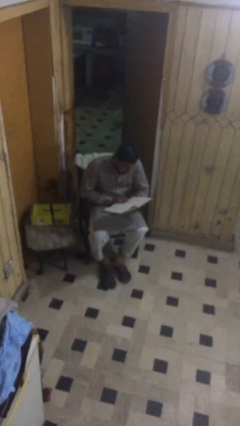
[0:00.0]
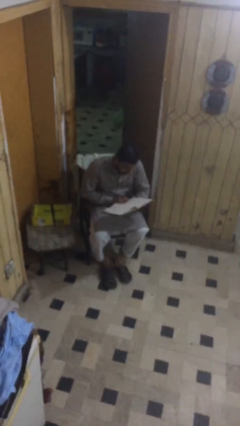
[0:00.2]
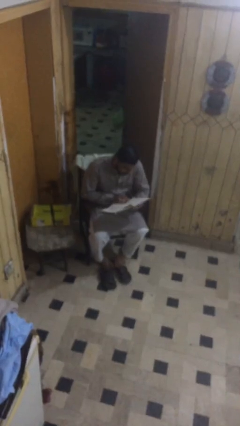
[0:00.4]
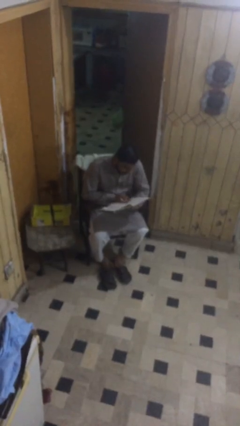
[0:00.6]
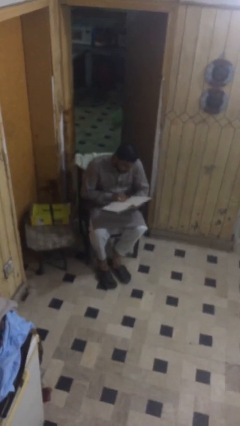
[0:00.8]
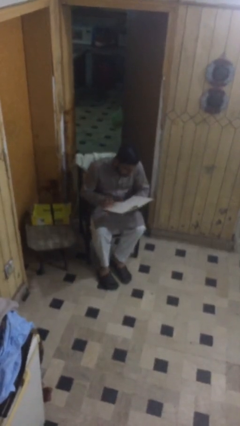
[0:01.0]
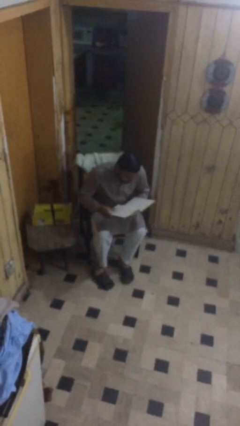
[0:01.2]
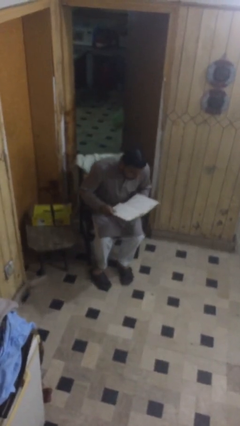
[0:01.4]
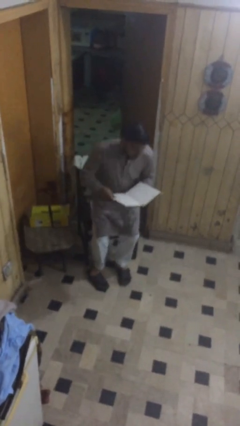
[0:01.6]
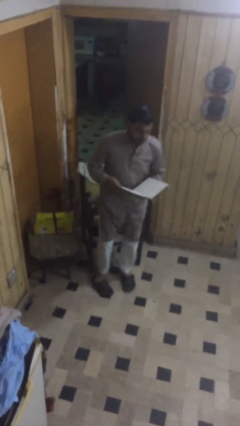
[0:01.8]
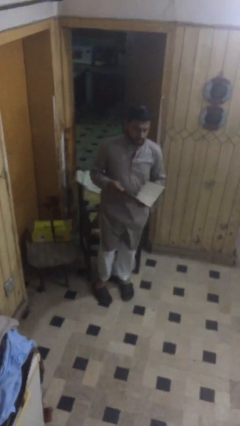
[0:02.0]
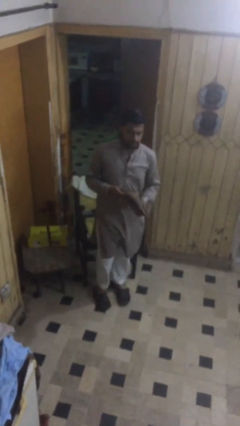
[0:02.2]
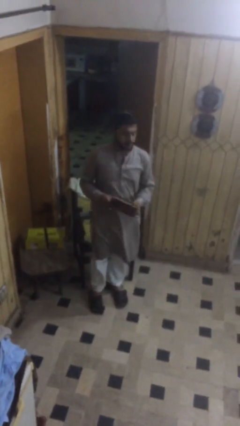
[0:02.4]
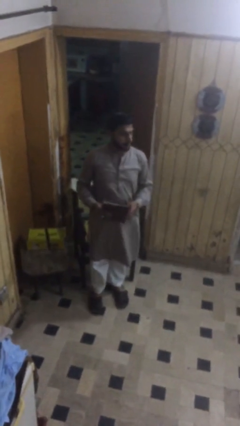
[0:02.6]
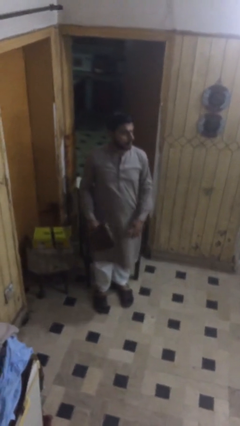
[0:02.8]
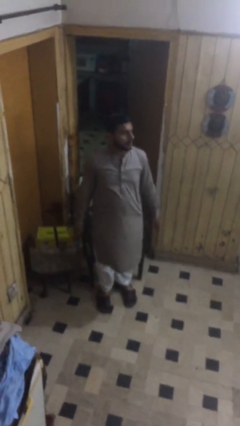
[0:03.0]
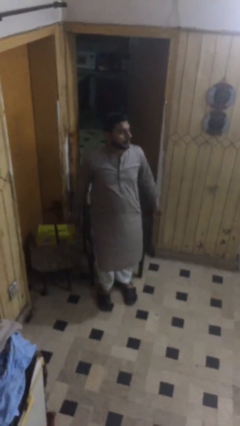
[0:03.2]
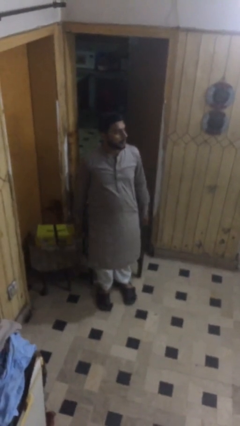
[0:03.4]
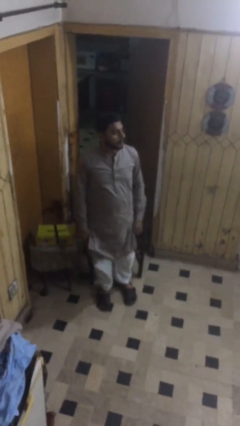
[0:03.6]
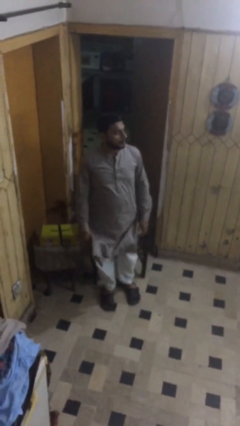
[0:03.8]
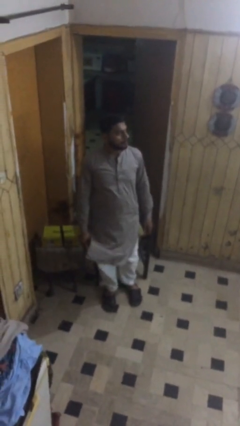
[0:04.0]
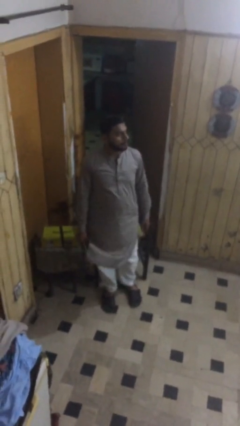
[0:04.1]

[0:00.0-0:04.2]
person stands up

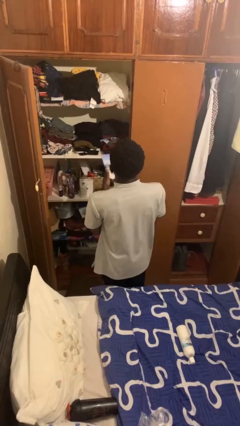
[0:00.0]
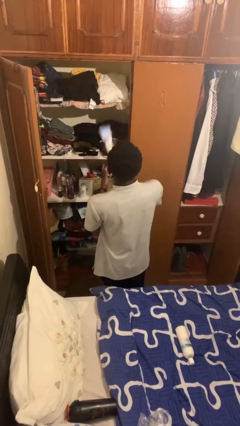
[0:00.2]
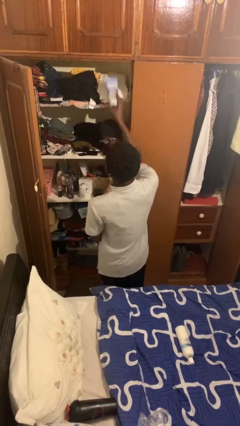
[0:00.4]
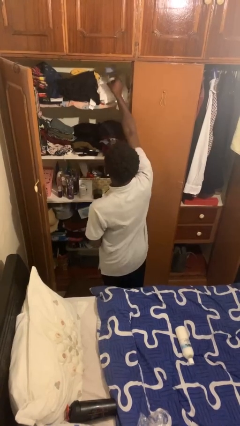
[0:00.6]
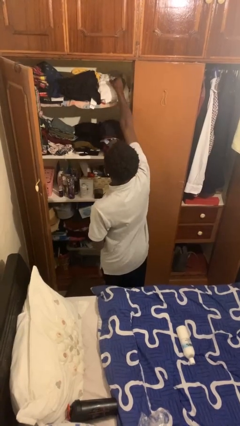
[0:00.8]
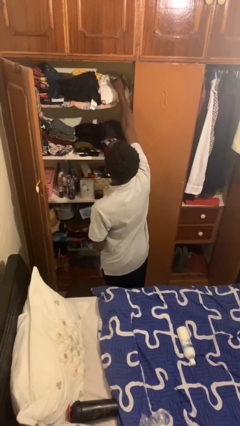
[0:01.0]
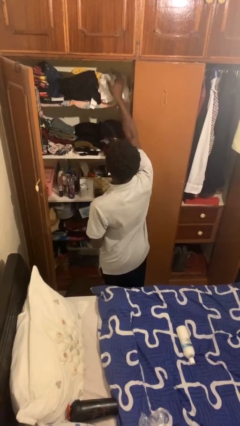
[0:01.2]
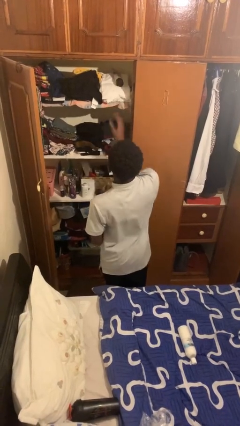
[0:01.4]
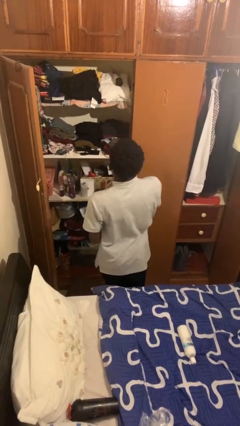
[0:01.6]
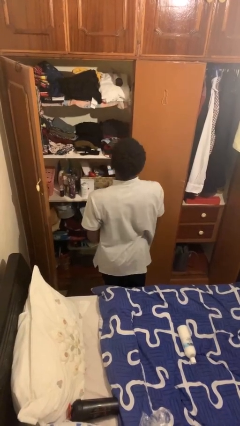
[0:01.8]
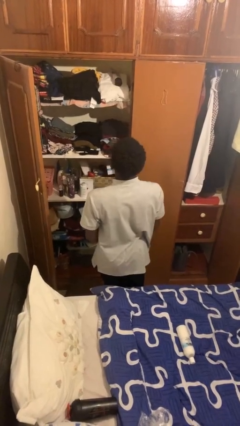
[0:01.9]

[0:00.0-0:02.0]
person puts down object on shelf

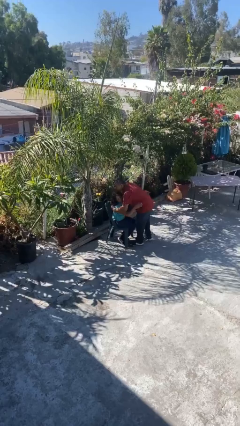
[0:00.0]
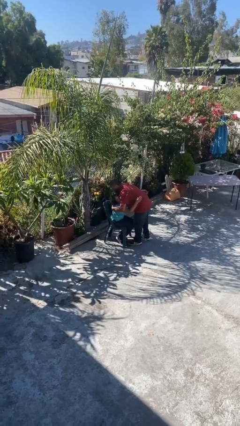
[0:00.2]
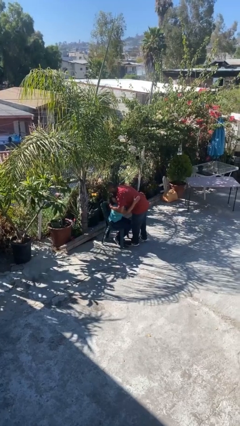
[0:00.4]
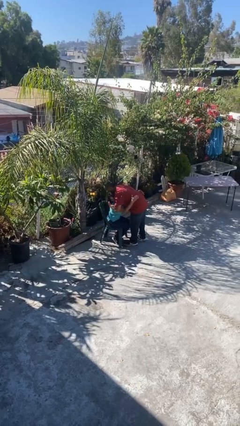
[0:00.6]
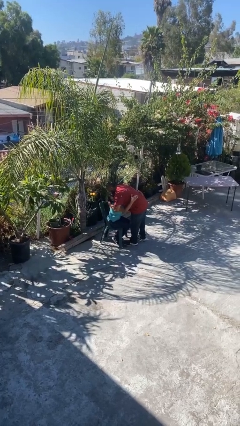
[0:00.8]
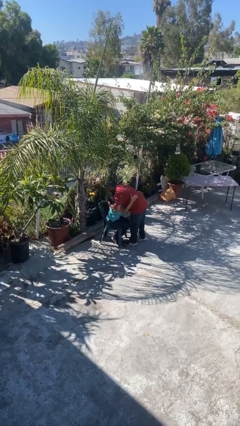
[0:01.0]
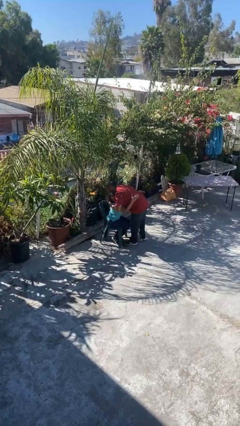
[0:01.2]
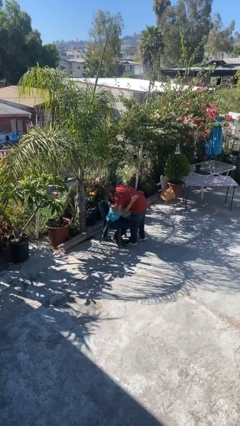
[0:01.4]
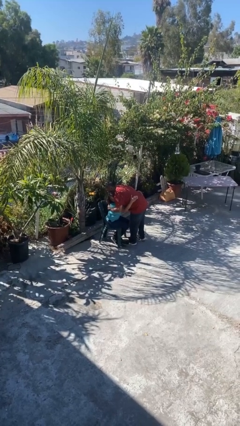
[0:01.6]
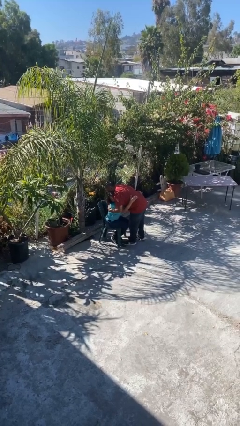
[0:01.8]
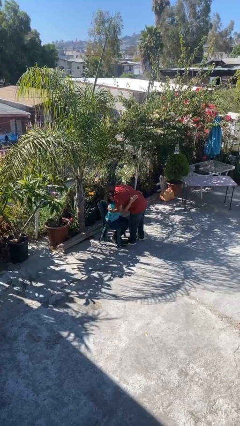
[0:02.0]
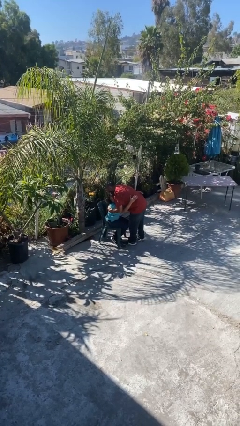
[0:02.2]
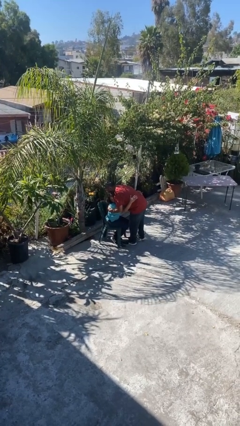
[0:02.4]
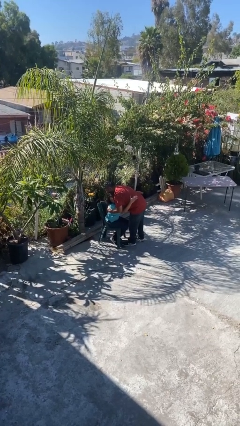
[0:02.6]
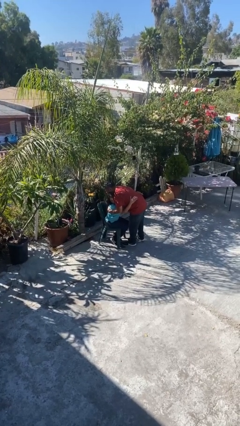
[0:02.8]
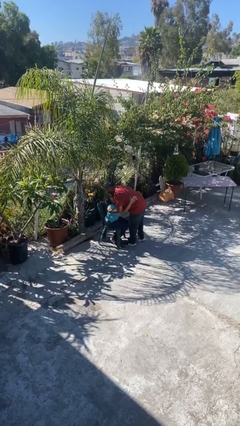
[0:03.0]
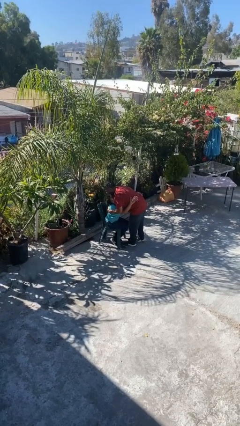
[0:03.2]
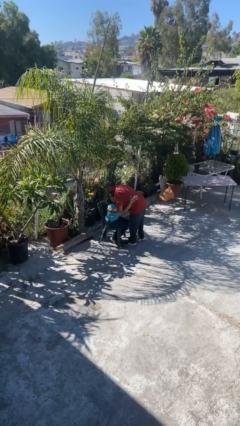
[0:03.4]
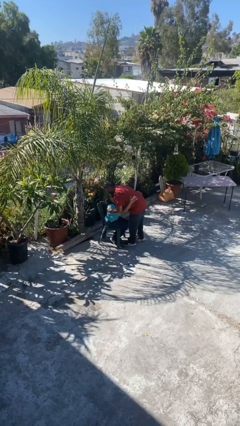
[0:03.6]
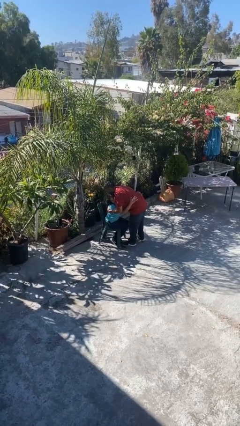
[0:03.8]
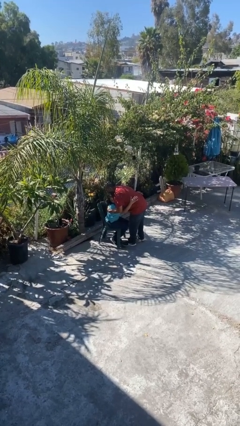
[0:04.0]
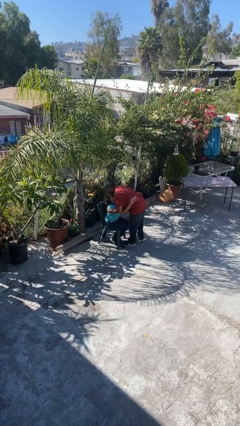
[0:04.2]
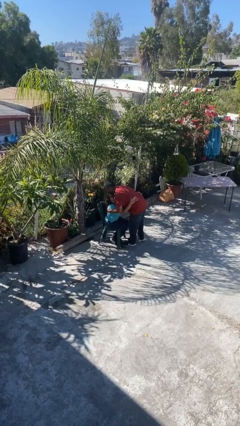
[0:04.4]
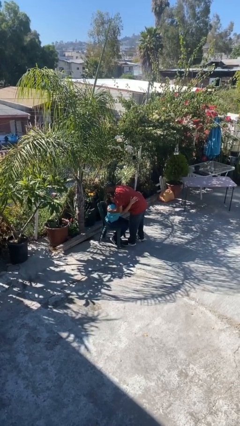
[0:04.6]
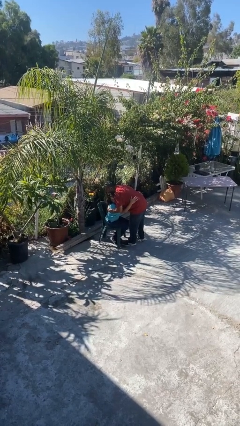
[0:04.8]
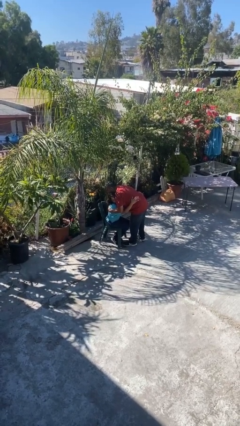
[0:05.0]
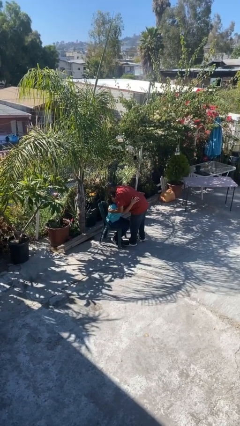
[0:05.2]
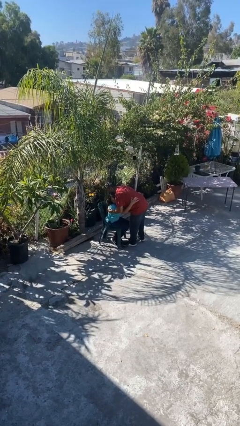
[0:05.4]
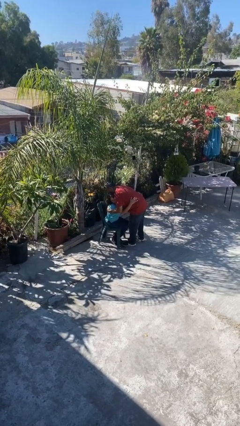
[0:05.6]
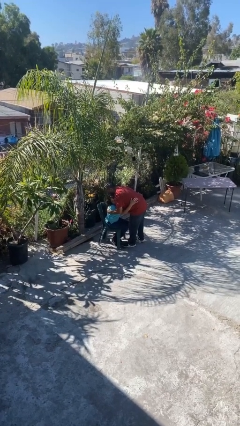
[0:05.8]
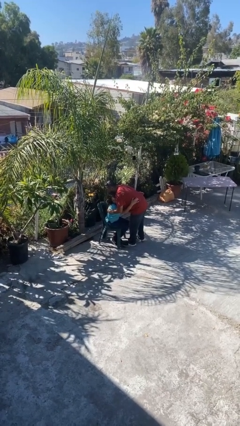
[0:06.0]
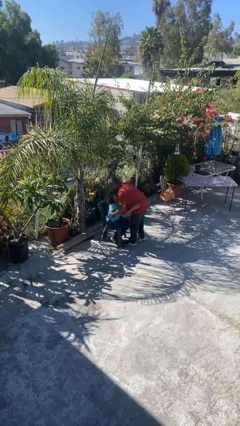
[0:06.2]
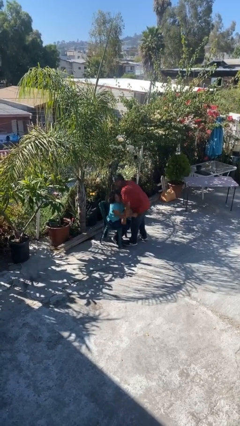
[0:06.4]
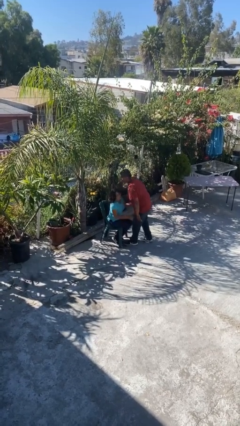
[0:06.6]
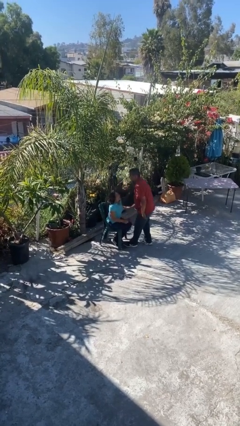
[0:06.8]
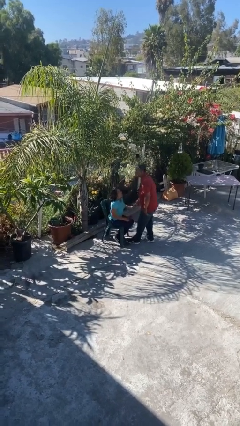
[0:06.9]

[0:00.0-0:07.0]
person embraces person

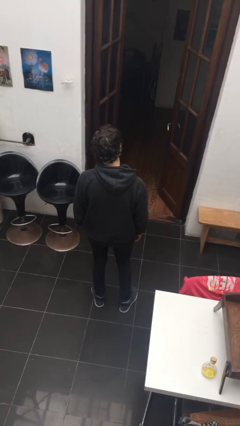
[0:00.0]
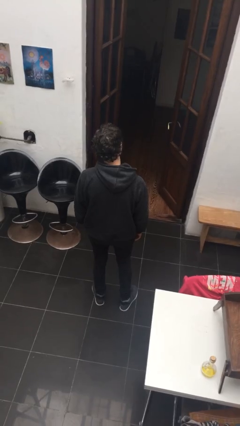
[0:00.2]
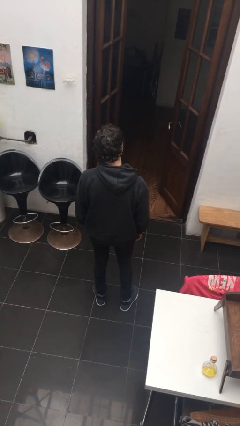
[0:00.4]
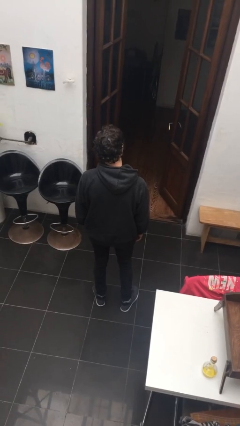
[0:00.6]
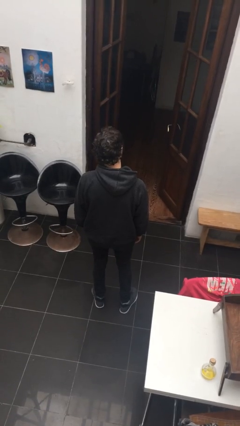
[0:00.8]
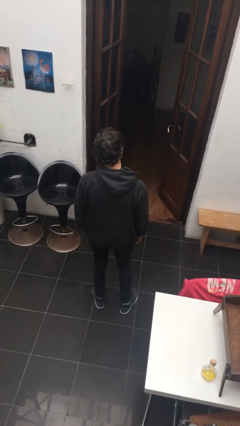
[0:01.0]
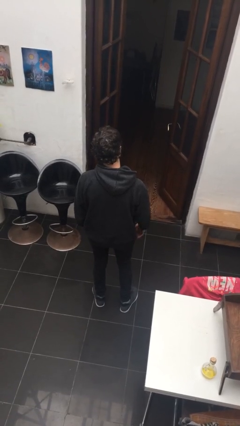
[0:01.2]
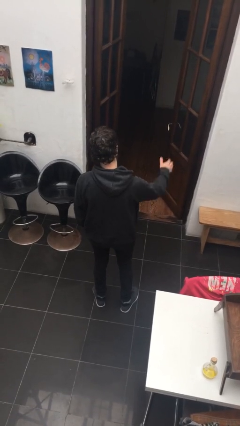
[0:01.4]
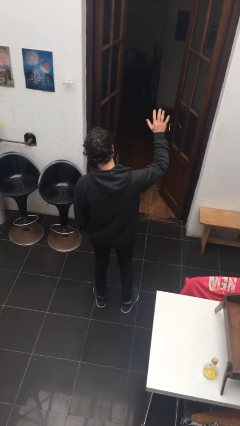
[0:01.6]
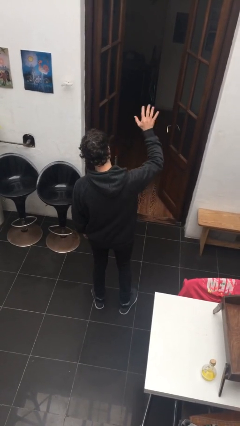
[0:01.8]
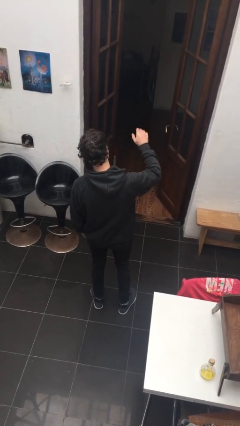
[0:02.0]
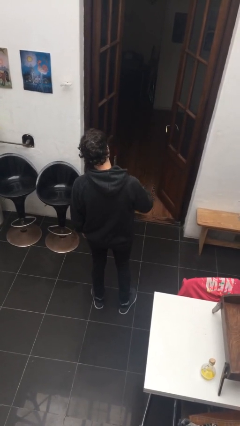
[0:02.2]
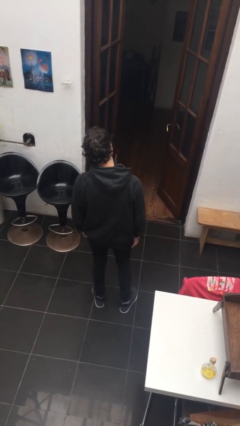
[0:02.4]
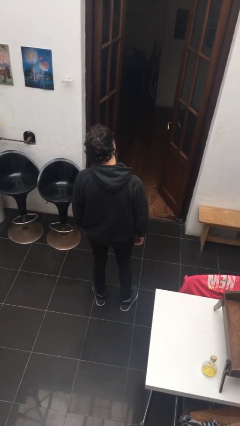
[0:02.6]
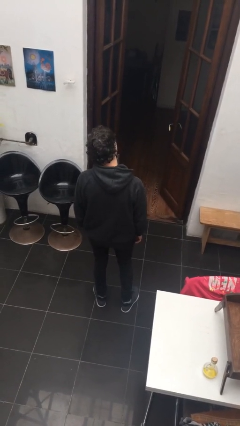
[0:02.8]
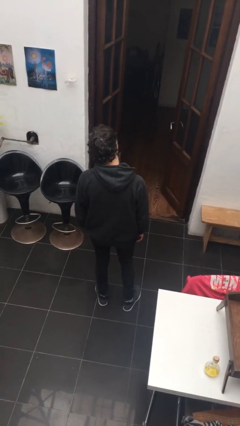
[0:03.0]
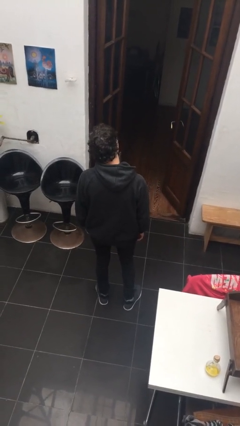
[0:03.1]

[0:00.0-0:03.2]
person waves at person

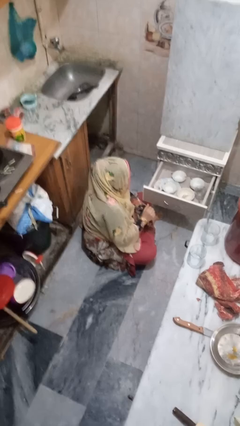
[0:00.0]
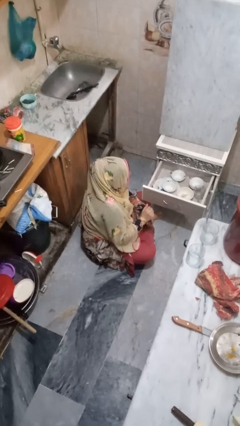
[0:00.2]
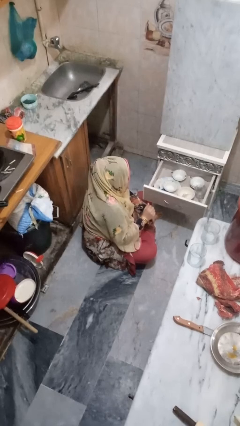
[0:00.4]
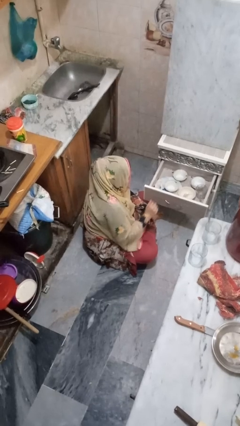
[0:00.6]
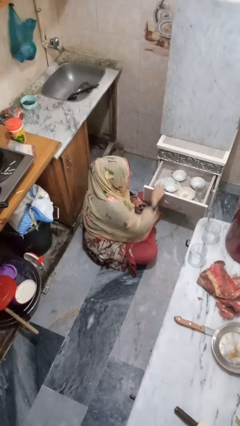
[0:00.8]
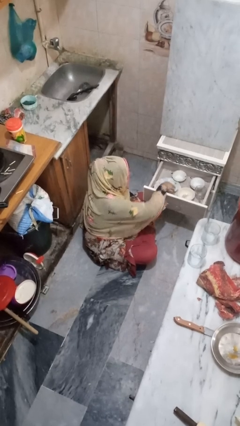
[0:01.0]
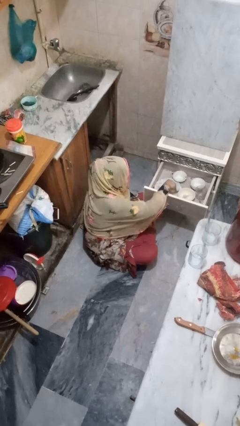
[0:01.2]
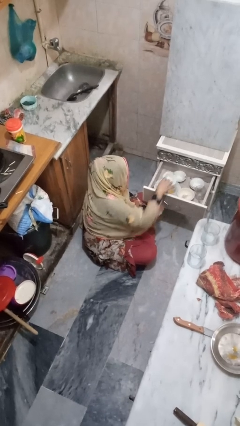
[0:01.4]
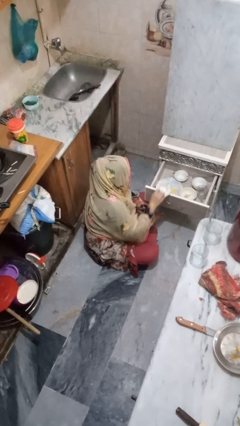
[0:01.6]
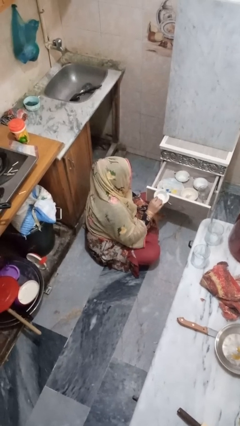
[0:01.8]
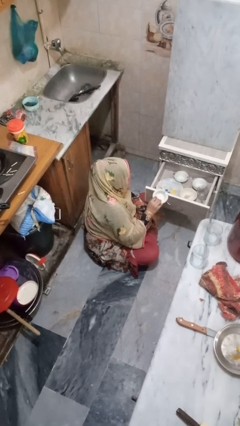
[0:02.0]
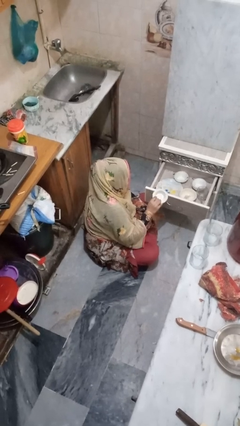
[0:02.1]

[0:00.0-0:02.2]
person takes object from kitchen drawer
